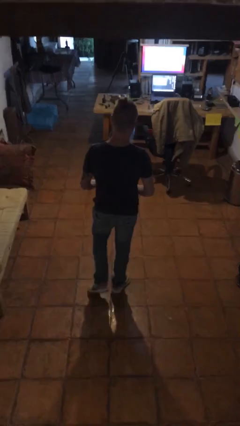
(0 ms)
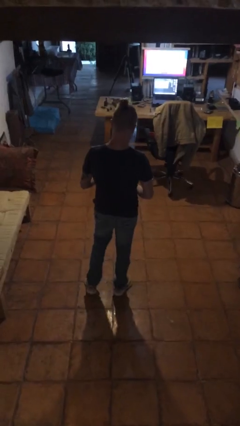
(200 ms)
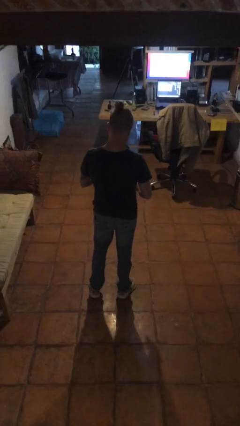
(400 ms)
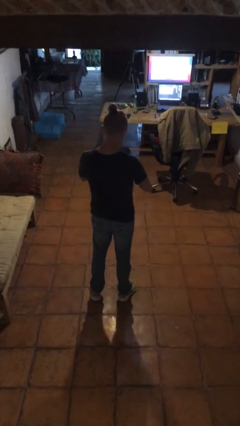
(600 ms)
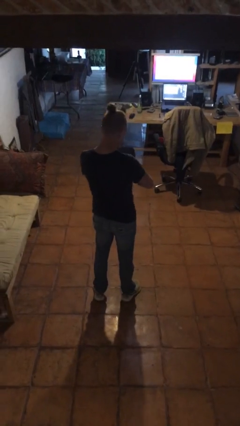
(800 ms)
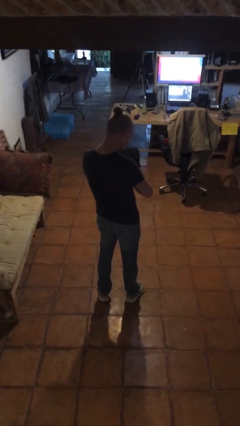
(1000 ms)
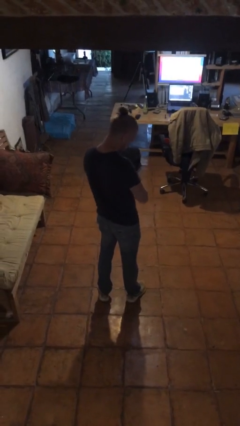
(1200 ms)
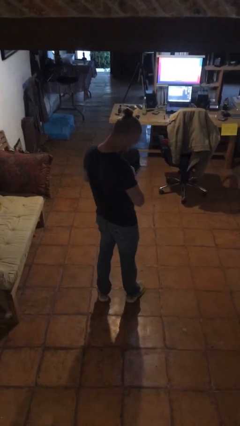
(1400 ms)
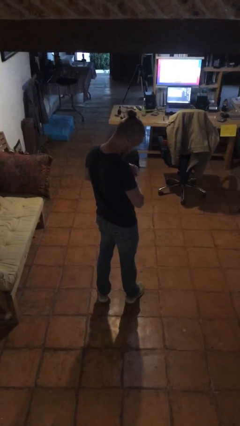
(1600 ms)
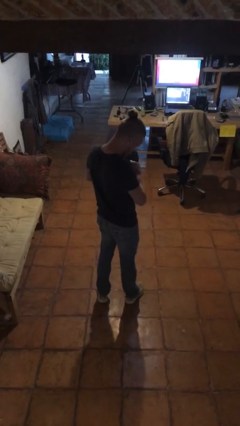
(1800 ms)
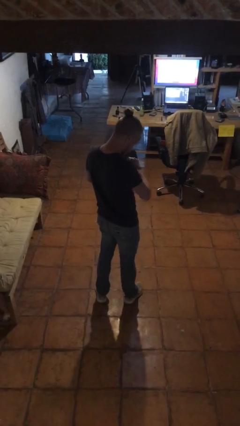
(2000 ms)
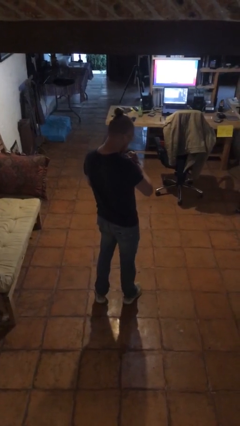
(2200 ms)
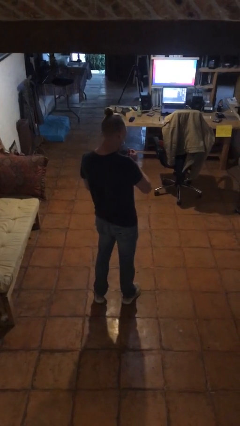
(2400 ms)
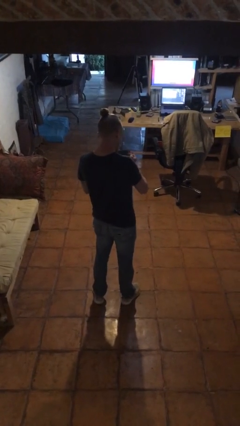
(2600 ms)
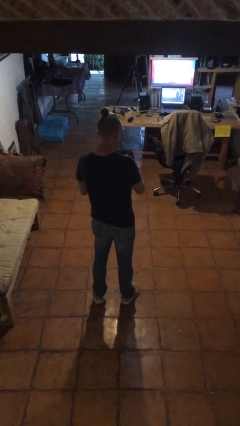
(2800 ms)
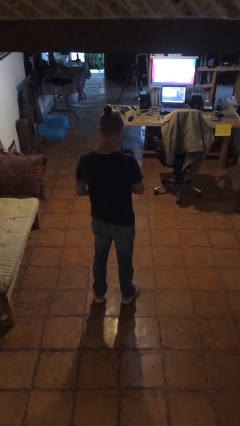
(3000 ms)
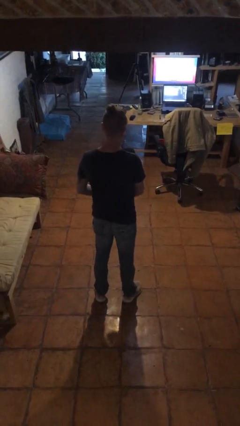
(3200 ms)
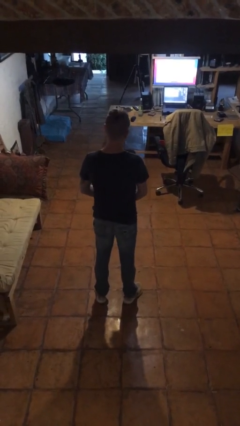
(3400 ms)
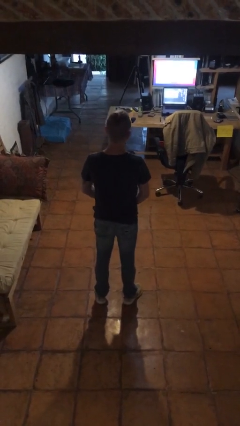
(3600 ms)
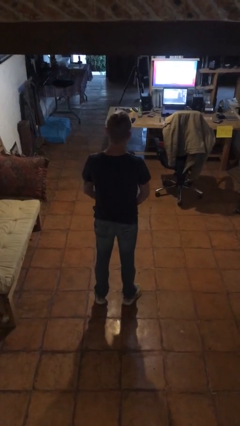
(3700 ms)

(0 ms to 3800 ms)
person puts on wristwatch

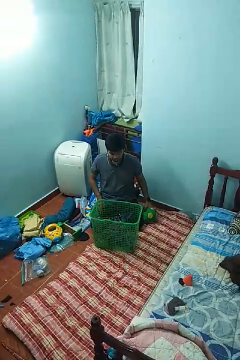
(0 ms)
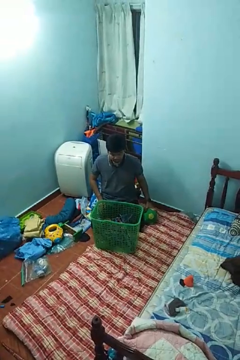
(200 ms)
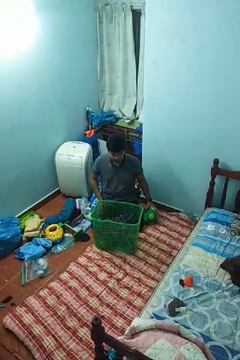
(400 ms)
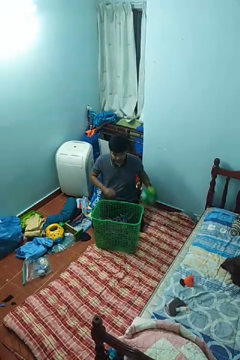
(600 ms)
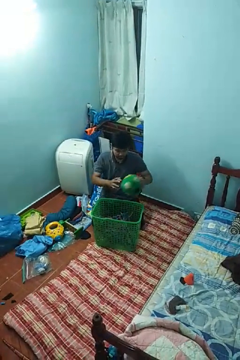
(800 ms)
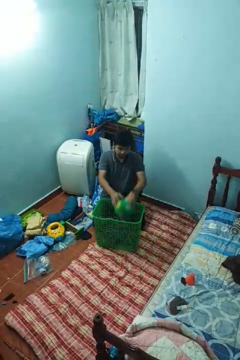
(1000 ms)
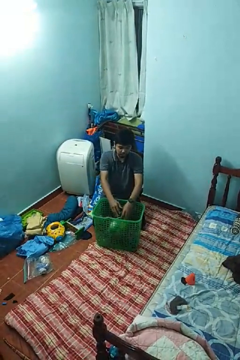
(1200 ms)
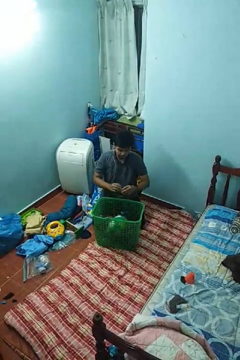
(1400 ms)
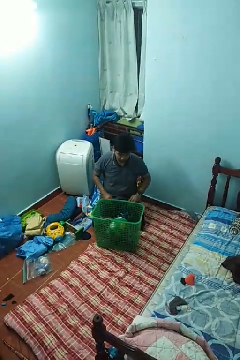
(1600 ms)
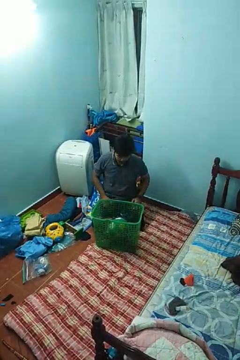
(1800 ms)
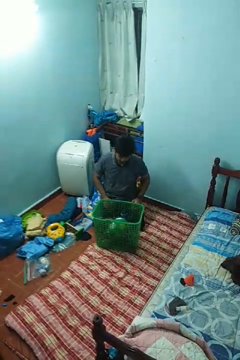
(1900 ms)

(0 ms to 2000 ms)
person puts object into basket

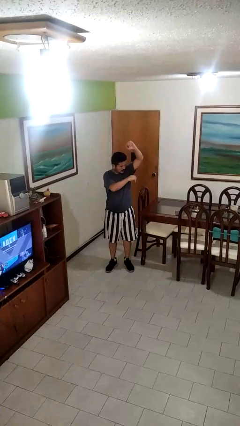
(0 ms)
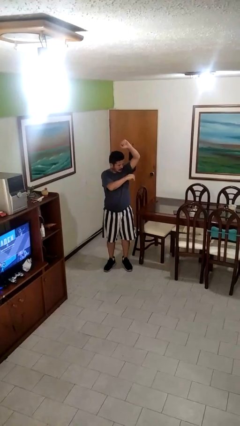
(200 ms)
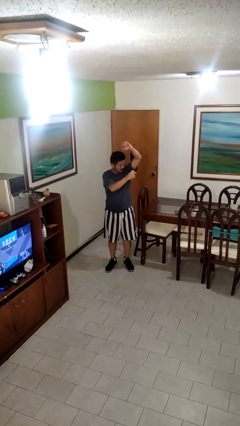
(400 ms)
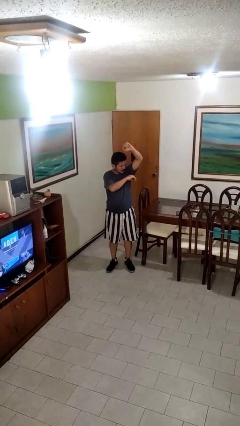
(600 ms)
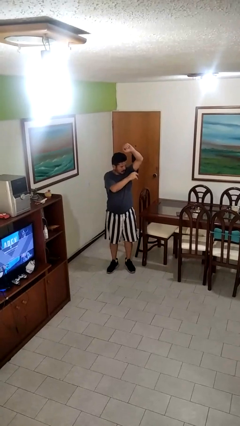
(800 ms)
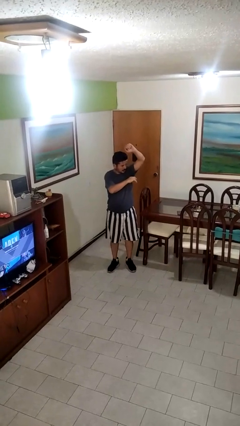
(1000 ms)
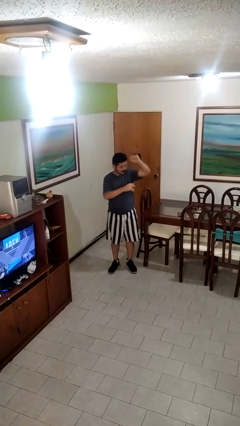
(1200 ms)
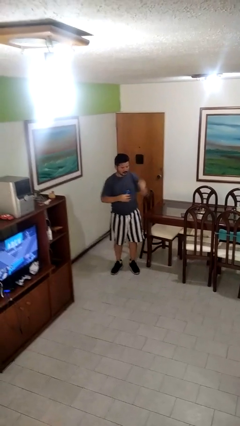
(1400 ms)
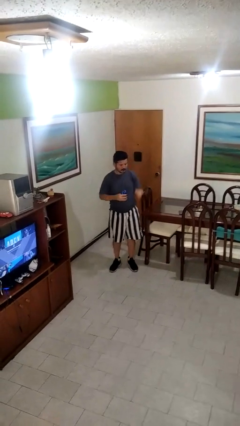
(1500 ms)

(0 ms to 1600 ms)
person applies deodorant

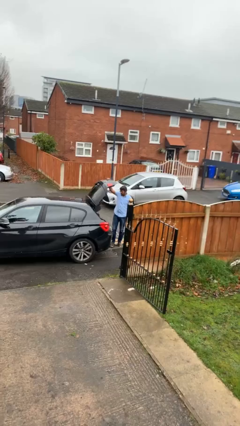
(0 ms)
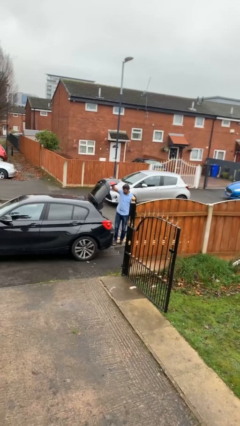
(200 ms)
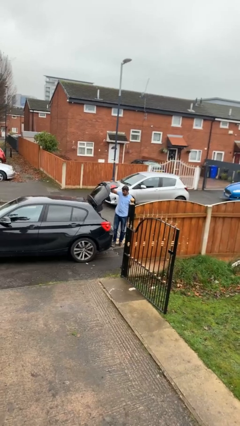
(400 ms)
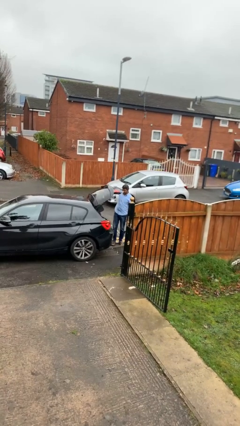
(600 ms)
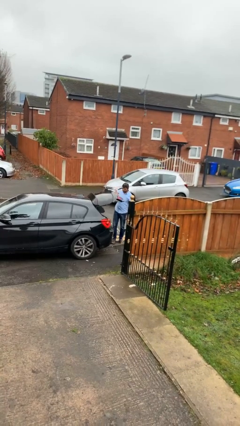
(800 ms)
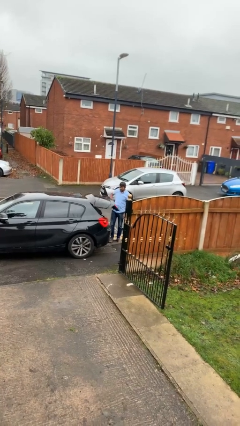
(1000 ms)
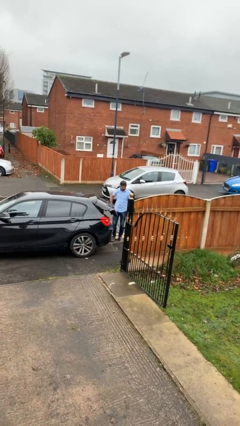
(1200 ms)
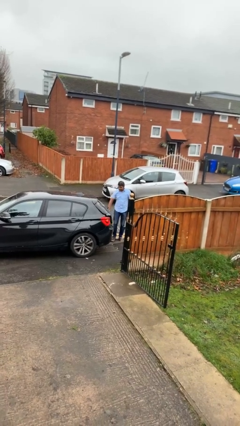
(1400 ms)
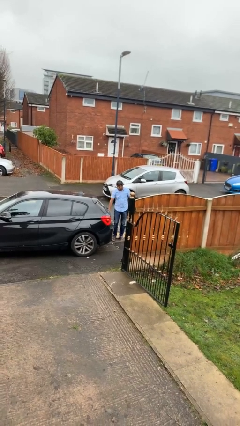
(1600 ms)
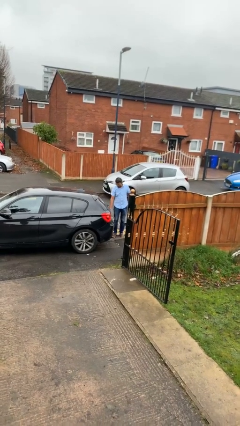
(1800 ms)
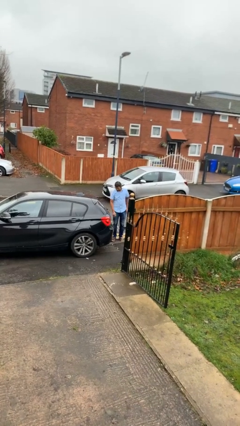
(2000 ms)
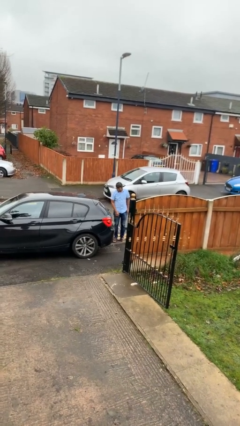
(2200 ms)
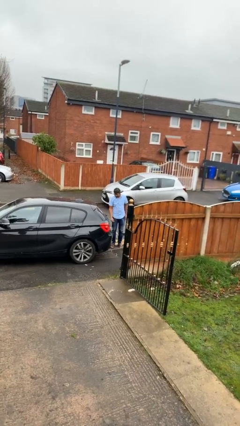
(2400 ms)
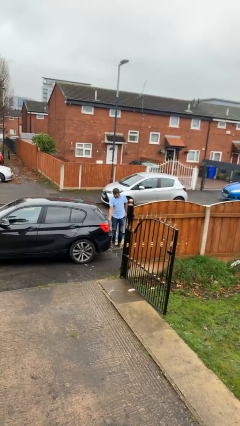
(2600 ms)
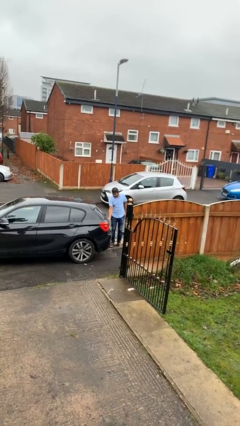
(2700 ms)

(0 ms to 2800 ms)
person closes car trunk

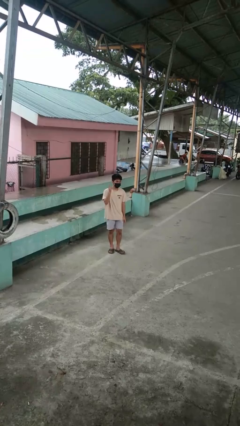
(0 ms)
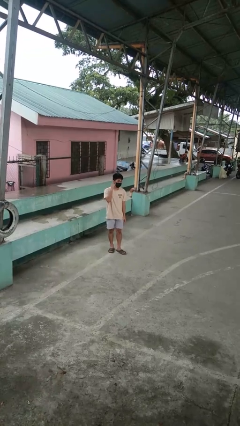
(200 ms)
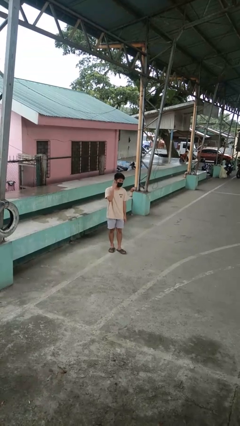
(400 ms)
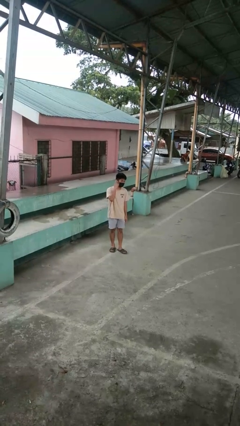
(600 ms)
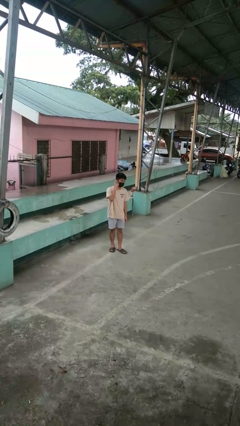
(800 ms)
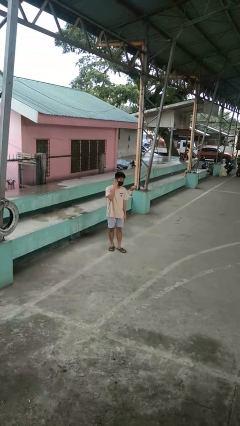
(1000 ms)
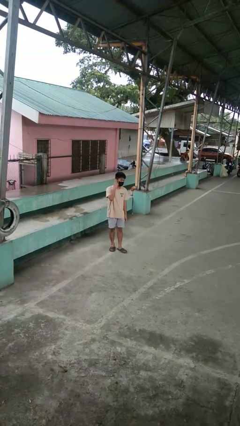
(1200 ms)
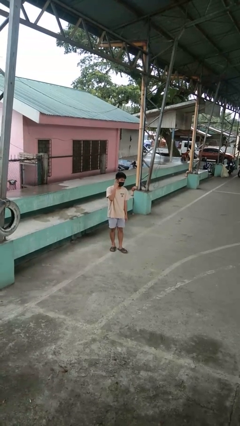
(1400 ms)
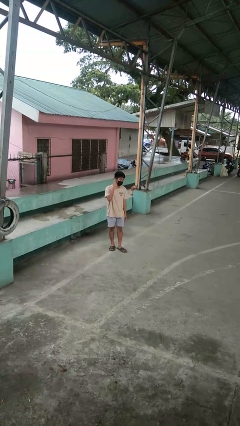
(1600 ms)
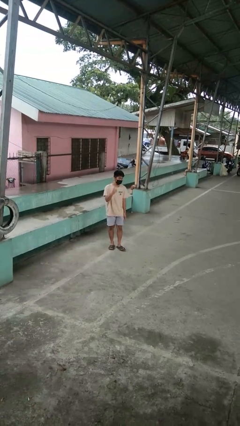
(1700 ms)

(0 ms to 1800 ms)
person gestures listen closely

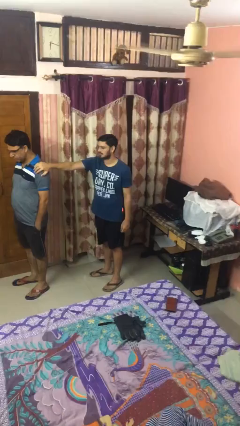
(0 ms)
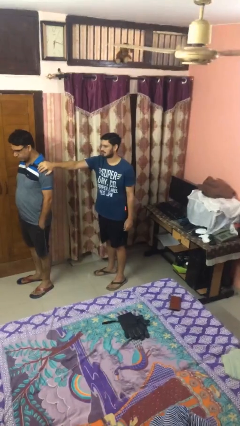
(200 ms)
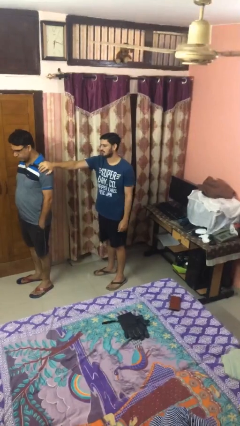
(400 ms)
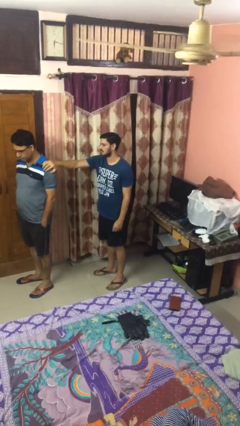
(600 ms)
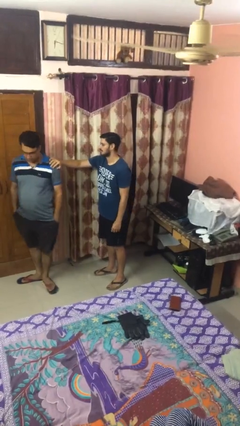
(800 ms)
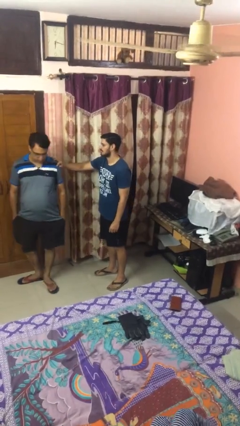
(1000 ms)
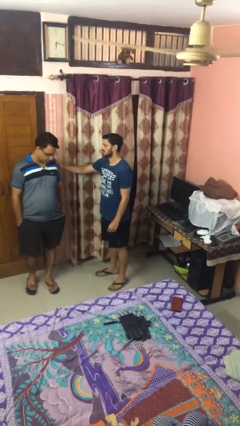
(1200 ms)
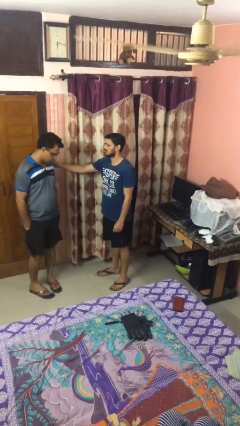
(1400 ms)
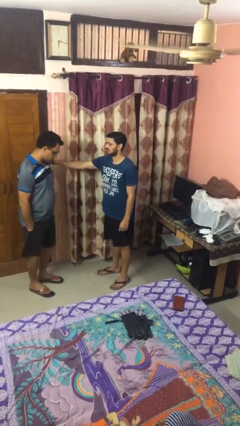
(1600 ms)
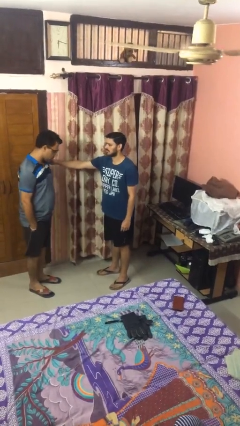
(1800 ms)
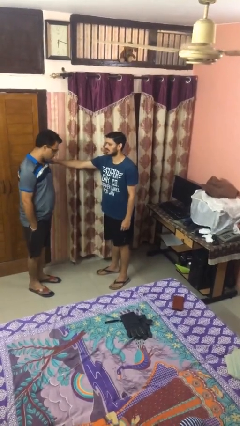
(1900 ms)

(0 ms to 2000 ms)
person spins person around

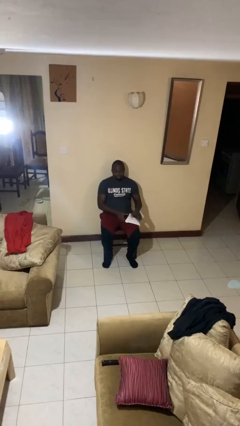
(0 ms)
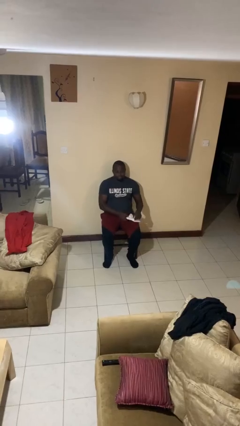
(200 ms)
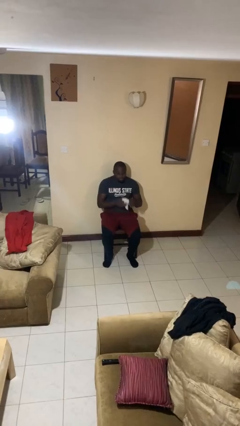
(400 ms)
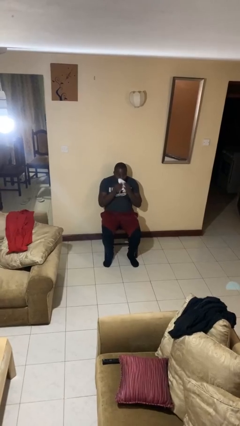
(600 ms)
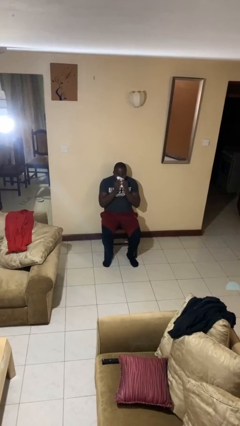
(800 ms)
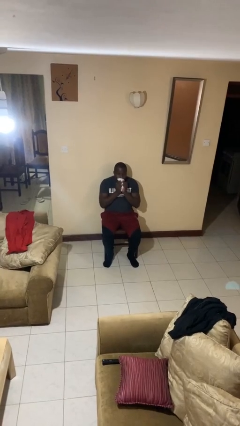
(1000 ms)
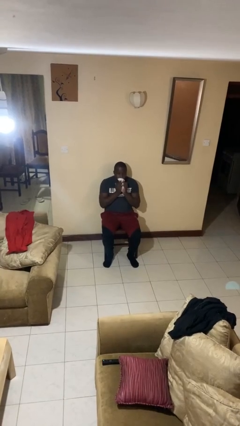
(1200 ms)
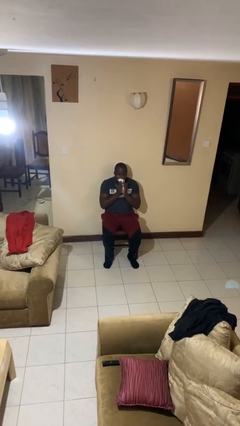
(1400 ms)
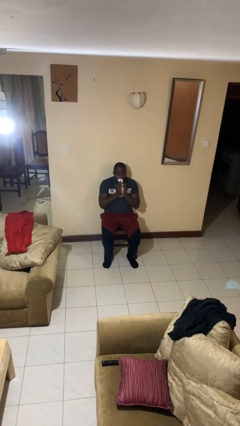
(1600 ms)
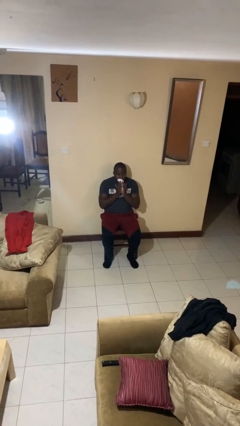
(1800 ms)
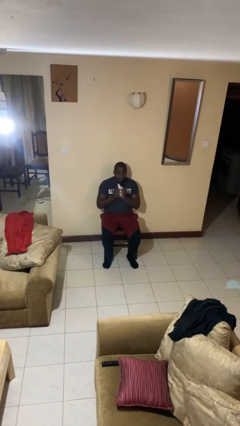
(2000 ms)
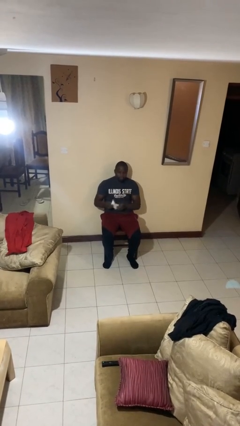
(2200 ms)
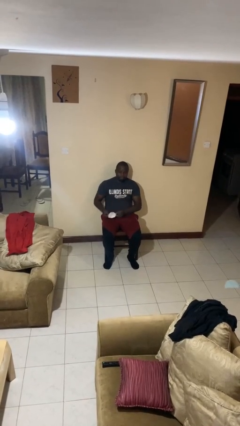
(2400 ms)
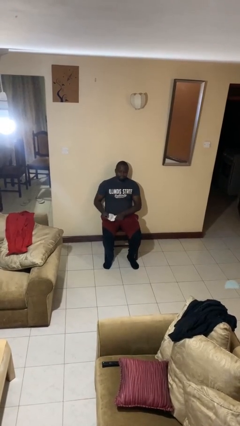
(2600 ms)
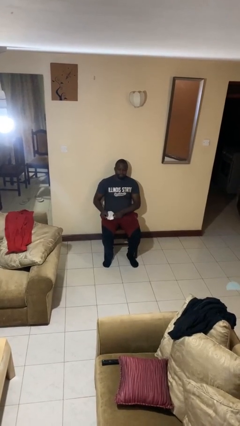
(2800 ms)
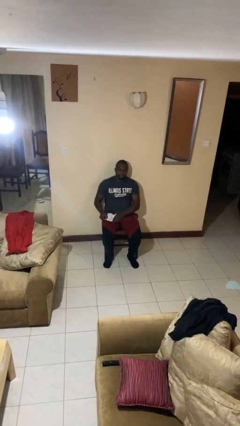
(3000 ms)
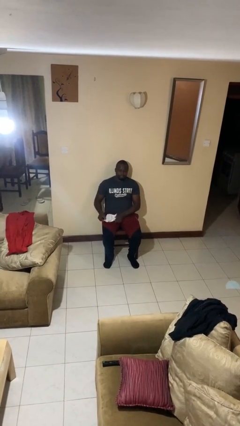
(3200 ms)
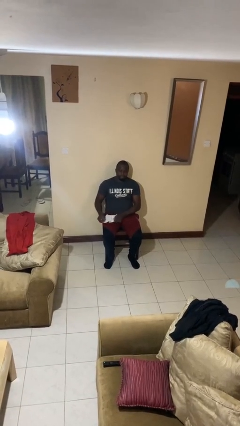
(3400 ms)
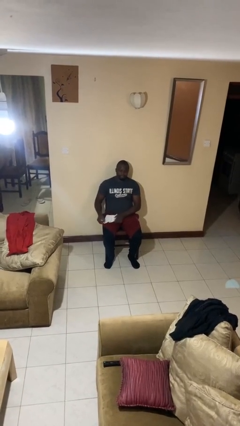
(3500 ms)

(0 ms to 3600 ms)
person wipes mouth with napkin
